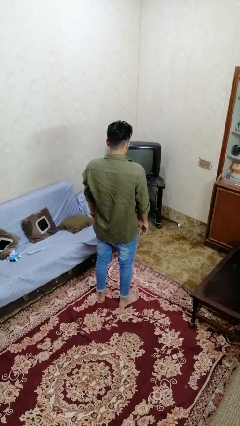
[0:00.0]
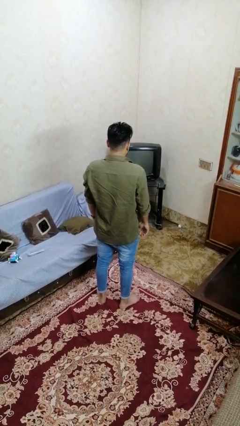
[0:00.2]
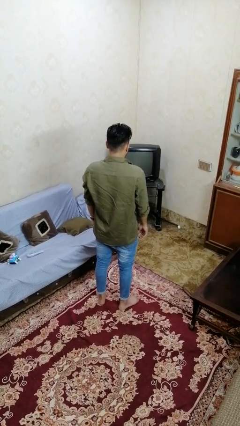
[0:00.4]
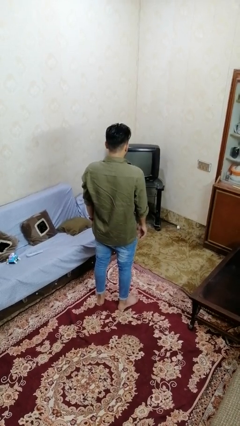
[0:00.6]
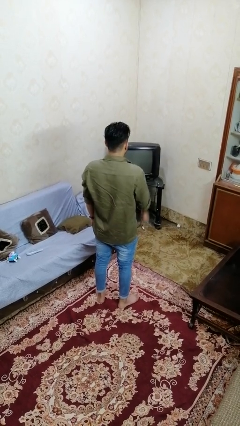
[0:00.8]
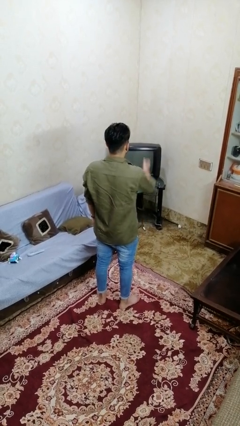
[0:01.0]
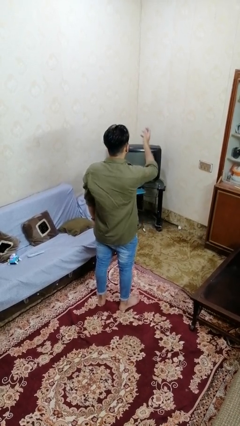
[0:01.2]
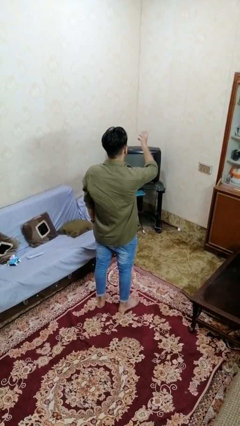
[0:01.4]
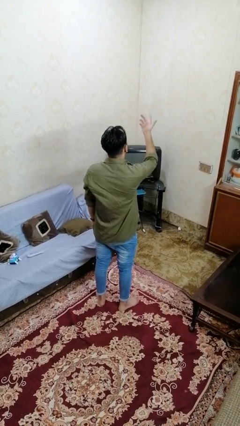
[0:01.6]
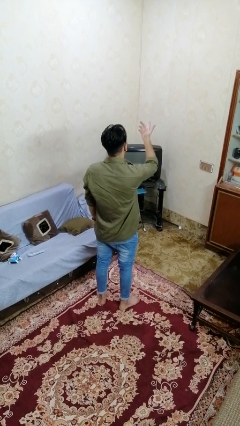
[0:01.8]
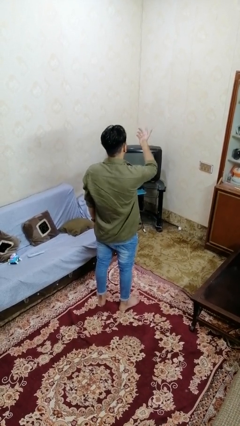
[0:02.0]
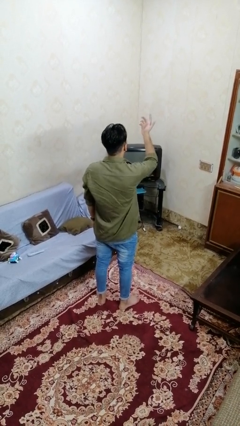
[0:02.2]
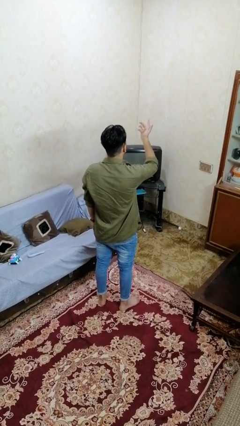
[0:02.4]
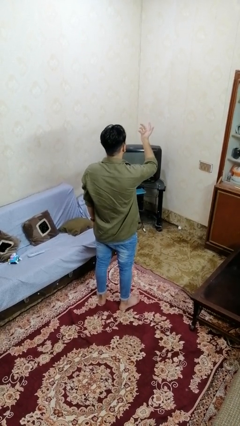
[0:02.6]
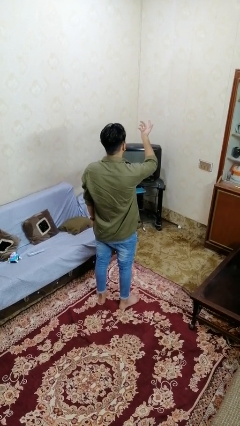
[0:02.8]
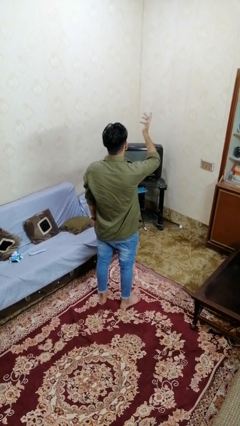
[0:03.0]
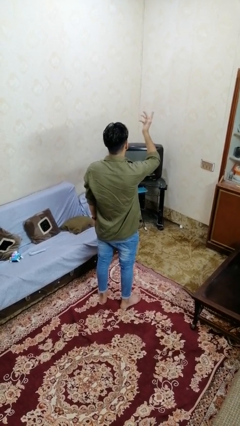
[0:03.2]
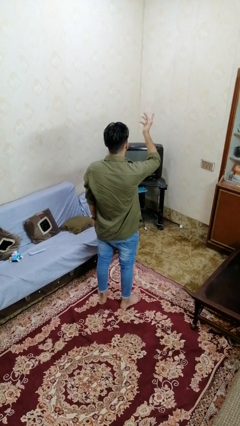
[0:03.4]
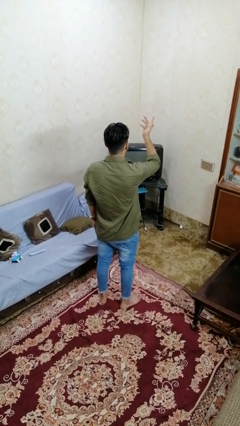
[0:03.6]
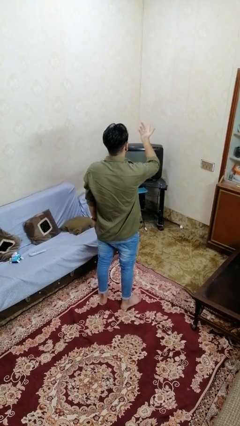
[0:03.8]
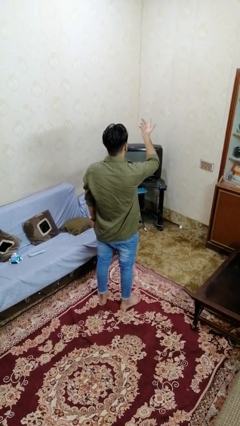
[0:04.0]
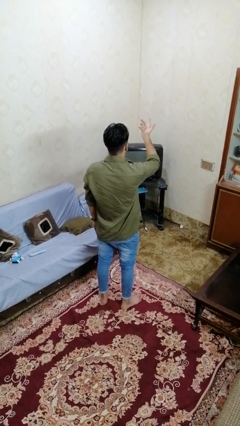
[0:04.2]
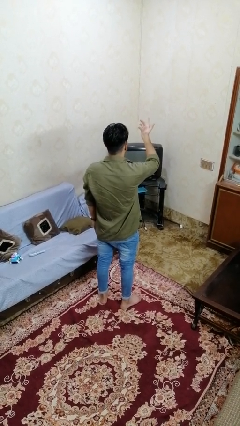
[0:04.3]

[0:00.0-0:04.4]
person gestures raise hand

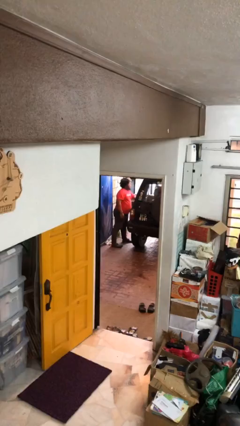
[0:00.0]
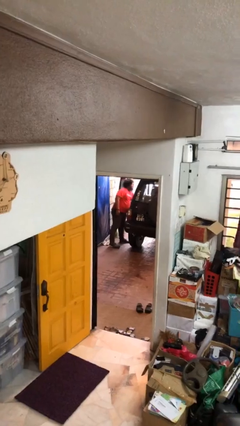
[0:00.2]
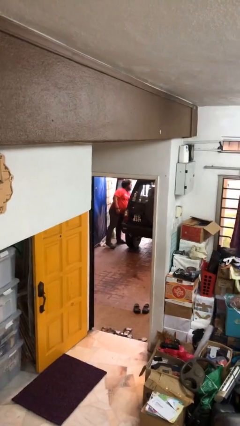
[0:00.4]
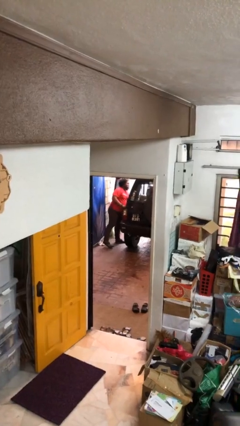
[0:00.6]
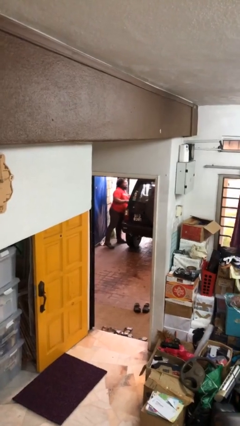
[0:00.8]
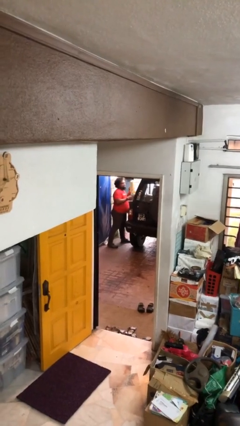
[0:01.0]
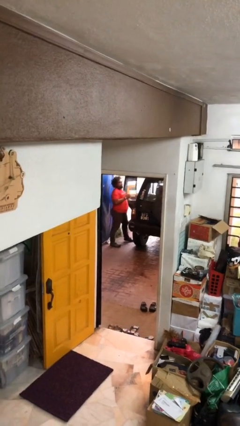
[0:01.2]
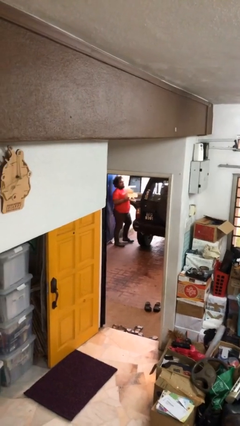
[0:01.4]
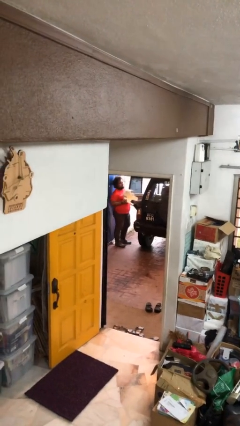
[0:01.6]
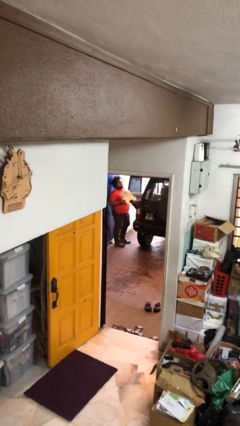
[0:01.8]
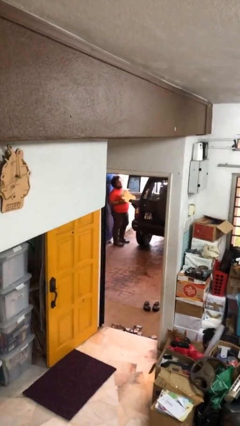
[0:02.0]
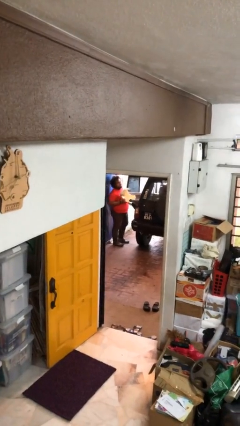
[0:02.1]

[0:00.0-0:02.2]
person unloads car

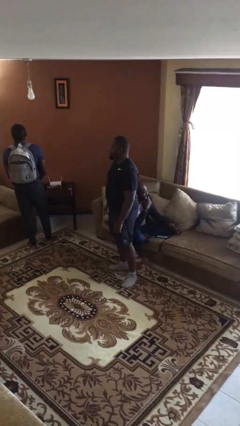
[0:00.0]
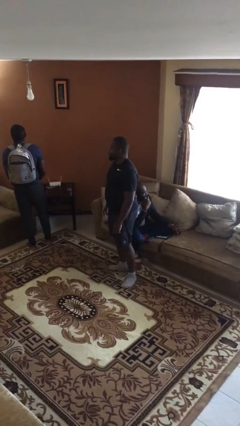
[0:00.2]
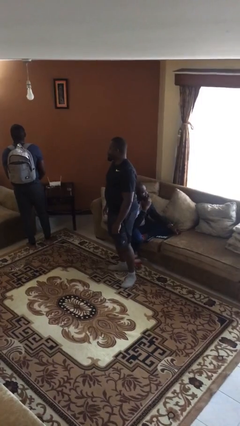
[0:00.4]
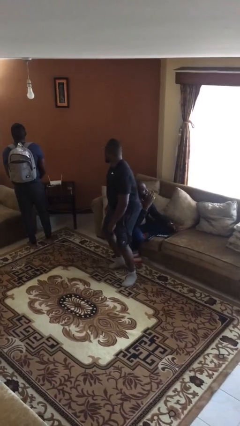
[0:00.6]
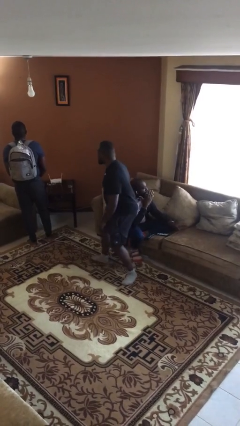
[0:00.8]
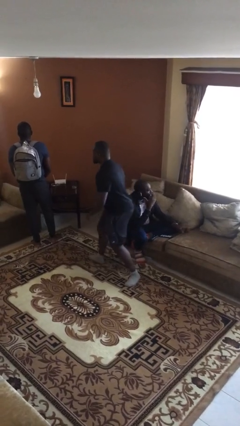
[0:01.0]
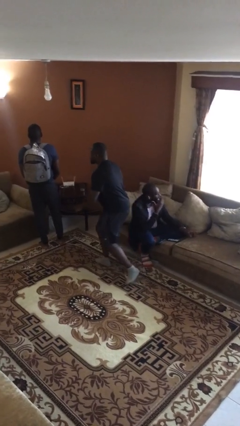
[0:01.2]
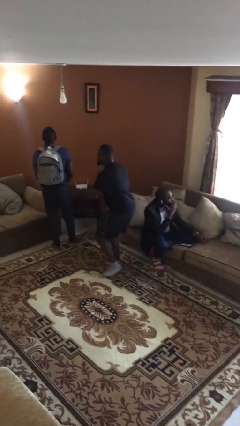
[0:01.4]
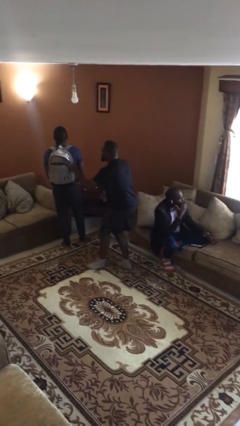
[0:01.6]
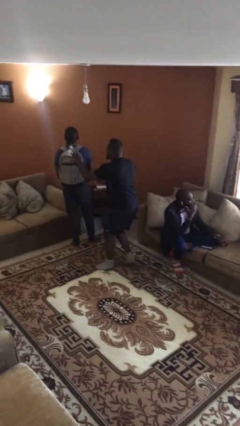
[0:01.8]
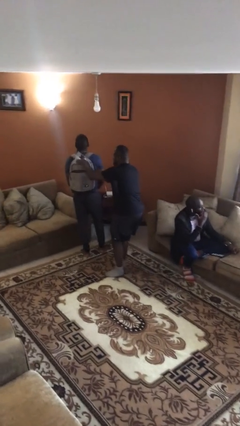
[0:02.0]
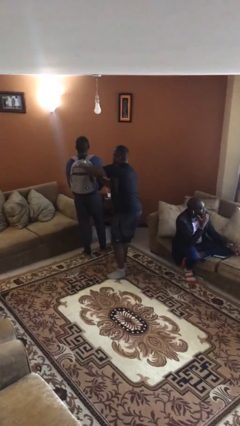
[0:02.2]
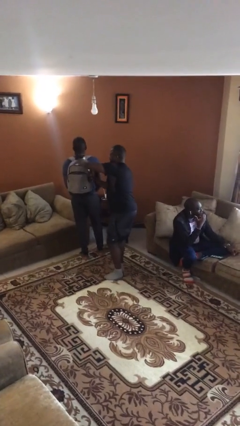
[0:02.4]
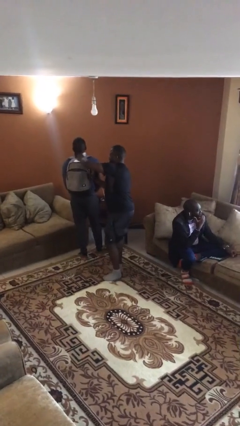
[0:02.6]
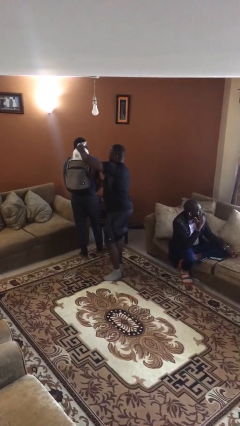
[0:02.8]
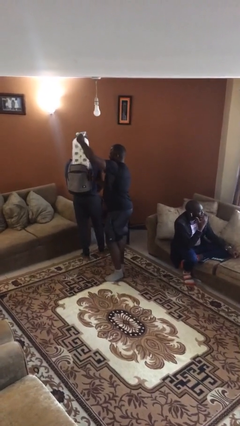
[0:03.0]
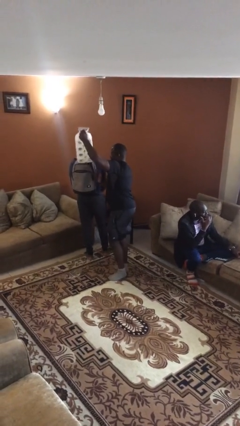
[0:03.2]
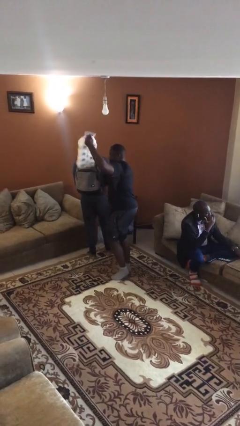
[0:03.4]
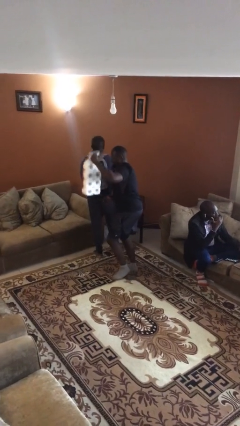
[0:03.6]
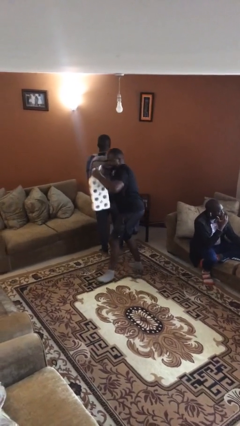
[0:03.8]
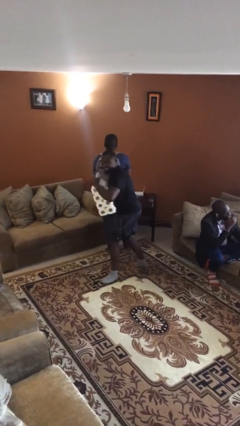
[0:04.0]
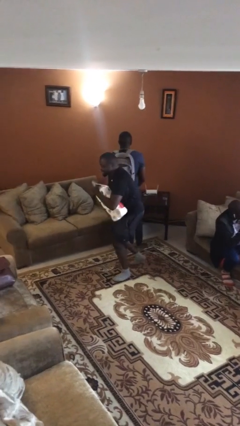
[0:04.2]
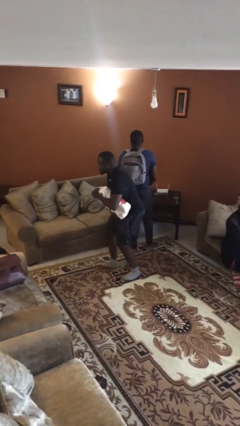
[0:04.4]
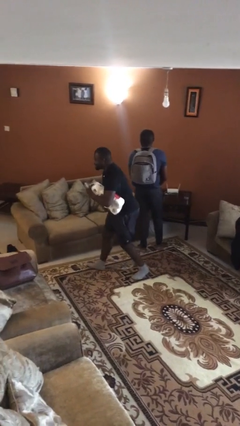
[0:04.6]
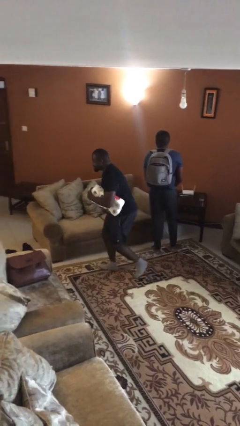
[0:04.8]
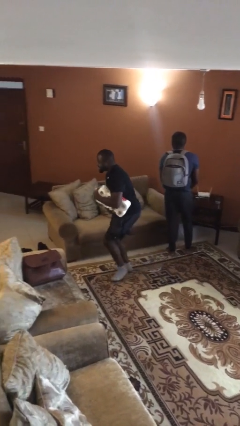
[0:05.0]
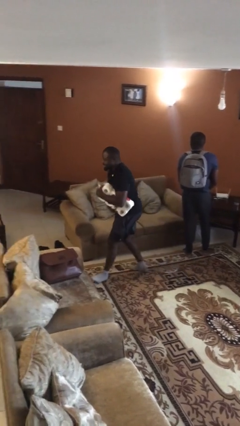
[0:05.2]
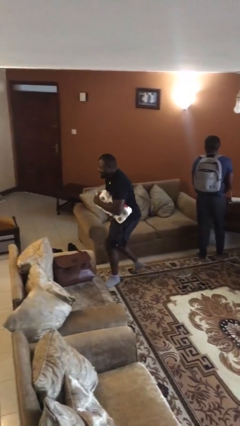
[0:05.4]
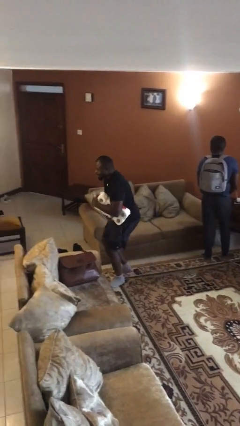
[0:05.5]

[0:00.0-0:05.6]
person steals object from person

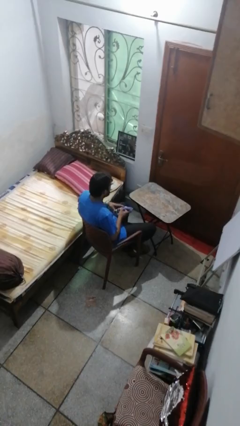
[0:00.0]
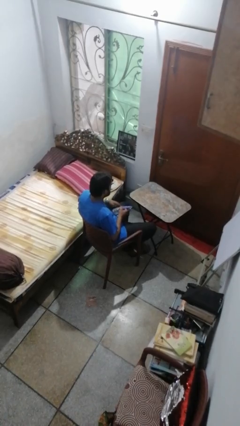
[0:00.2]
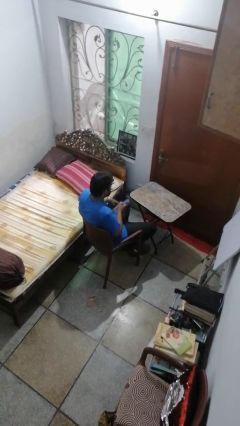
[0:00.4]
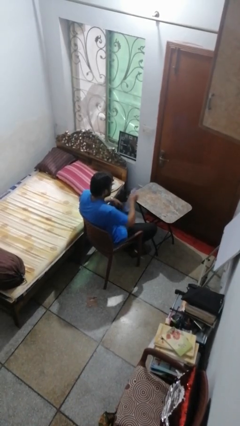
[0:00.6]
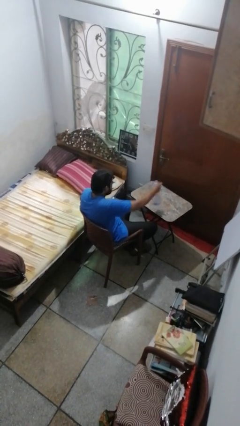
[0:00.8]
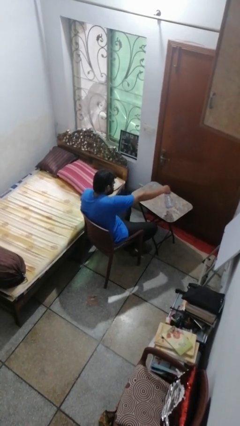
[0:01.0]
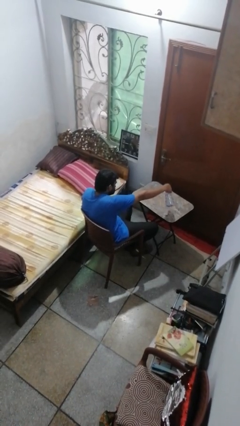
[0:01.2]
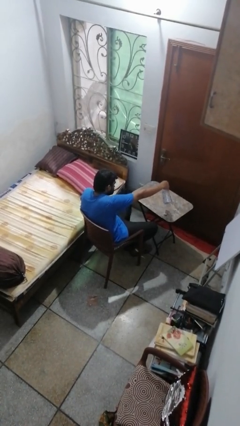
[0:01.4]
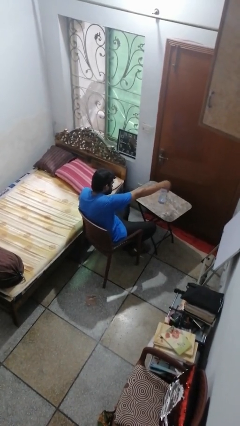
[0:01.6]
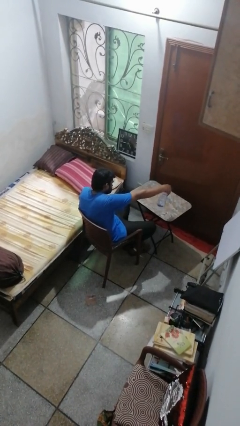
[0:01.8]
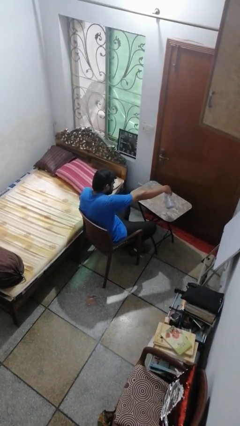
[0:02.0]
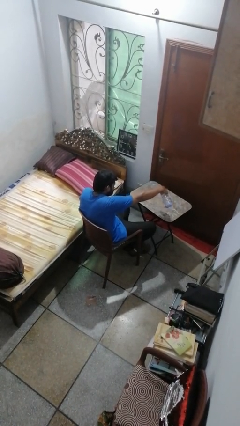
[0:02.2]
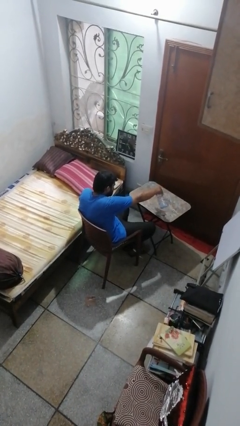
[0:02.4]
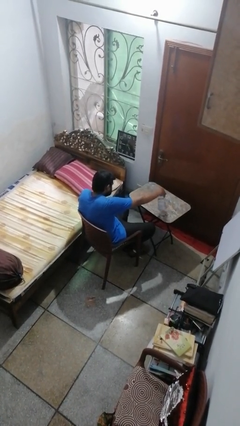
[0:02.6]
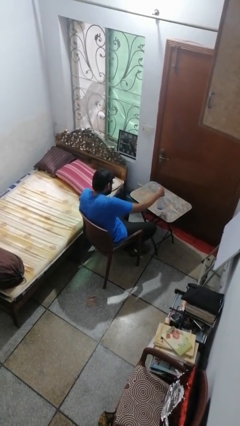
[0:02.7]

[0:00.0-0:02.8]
person sprays from bottle

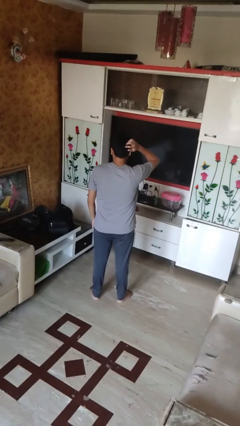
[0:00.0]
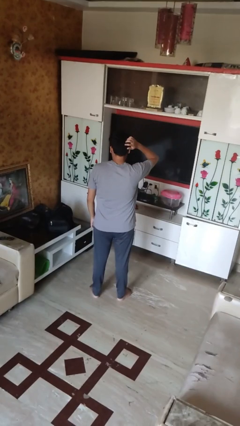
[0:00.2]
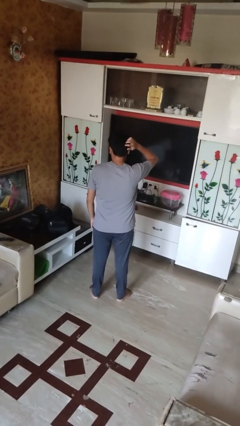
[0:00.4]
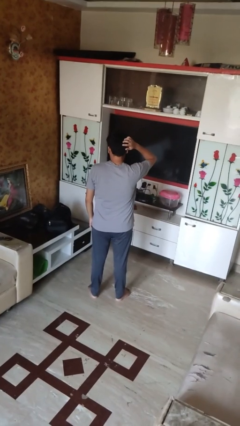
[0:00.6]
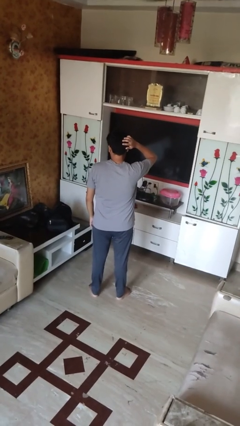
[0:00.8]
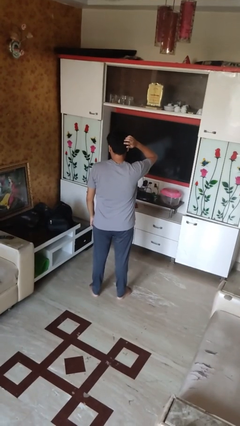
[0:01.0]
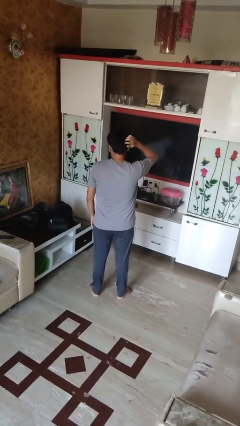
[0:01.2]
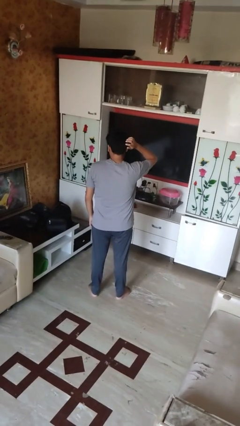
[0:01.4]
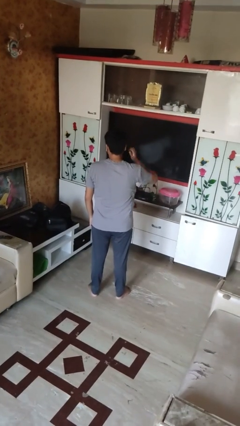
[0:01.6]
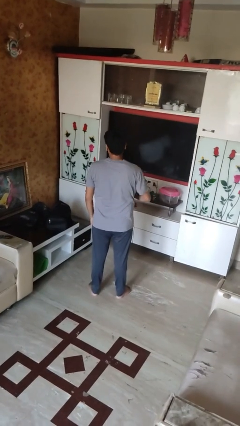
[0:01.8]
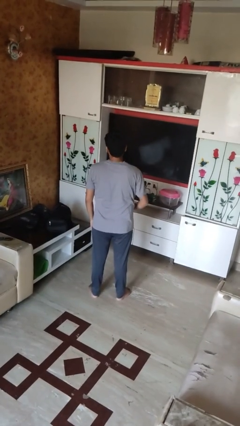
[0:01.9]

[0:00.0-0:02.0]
person scratches face

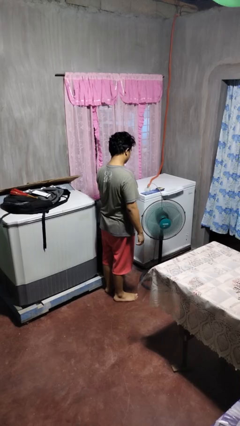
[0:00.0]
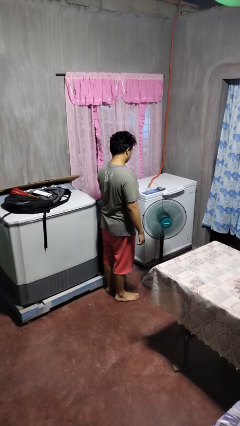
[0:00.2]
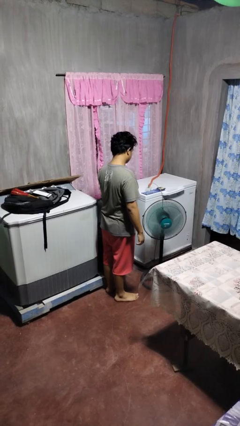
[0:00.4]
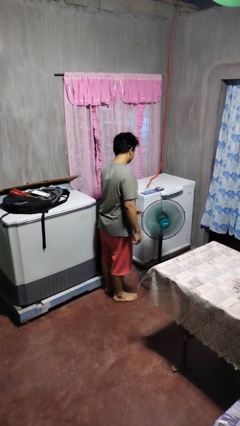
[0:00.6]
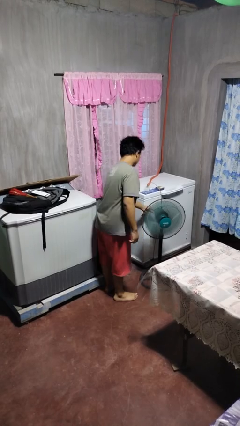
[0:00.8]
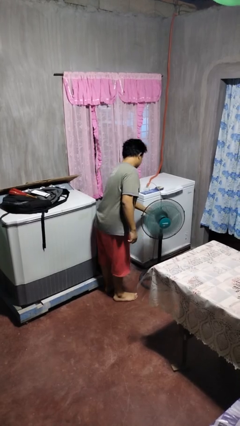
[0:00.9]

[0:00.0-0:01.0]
person turns off fan
